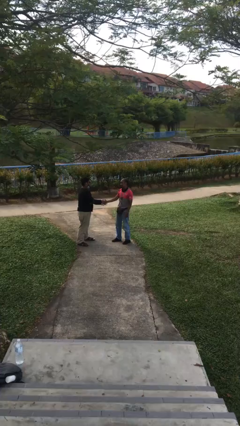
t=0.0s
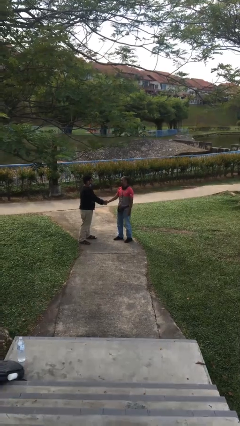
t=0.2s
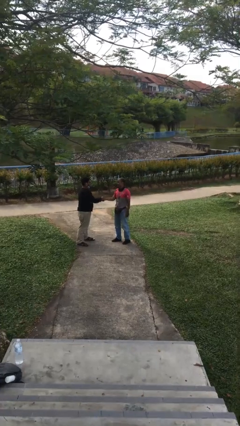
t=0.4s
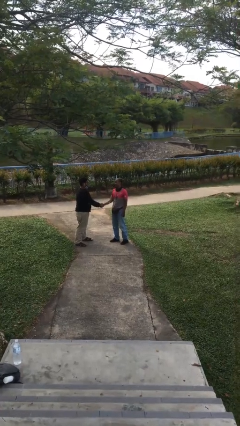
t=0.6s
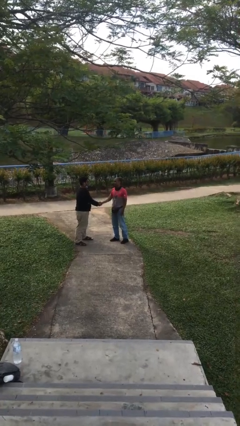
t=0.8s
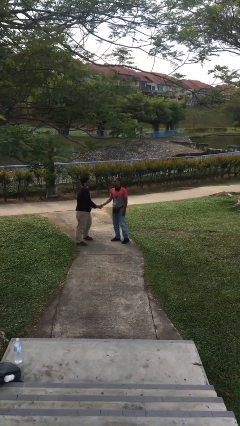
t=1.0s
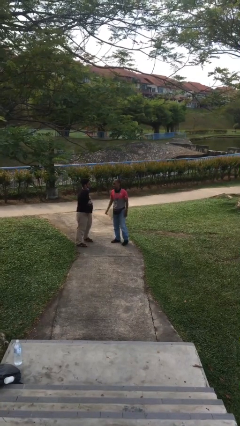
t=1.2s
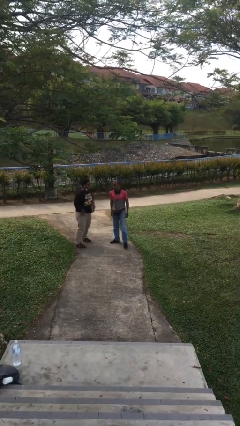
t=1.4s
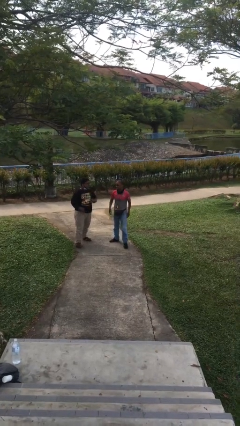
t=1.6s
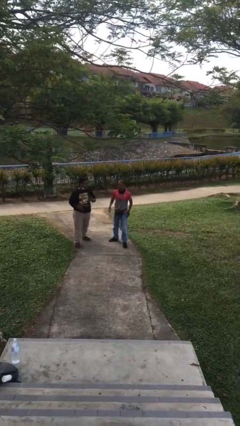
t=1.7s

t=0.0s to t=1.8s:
person shakes hand

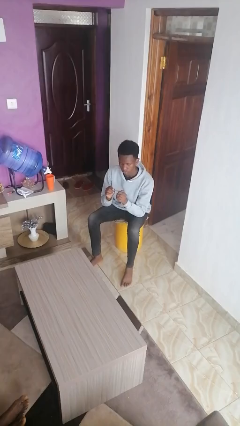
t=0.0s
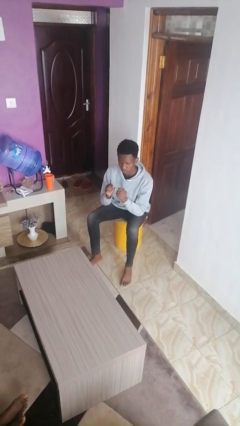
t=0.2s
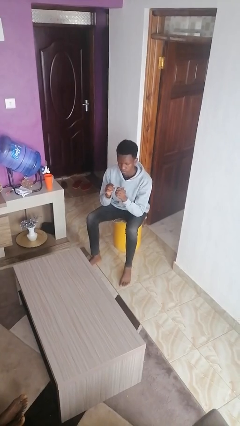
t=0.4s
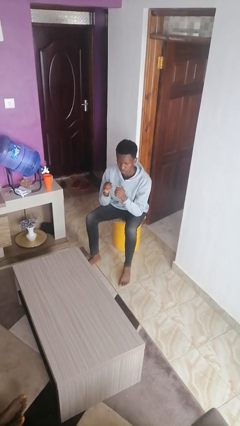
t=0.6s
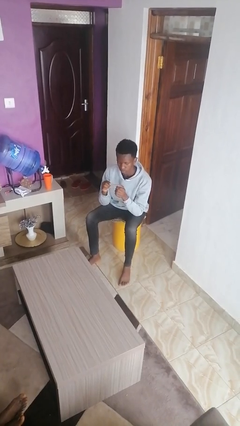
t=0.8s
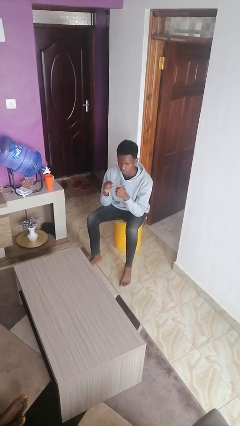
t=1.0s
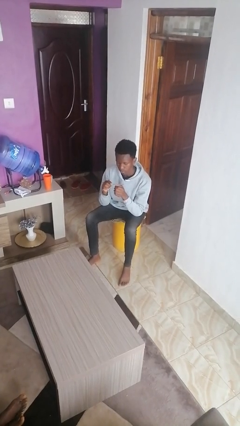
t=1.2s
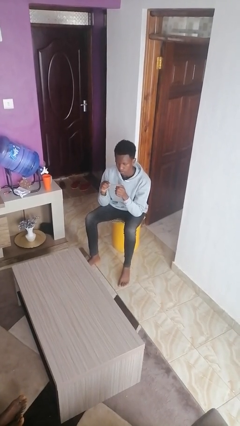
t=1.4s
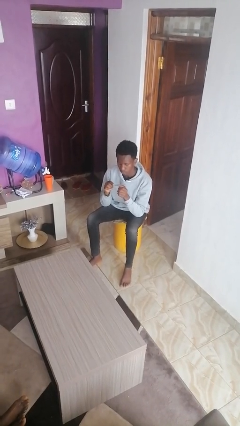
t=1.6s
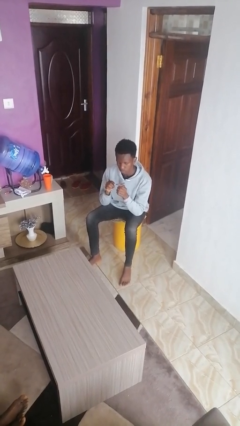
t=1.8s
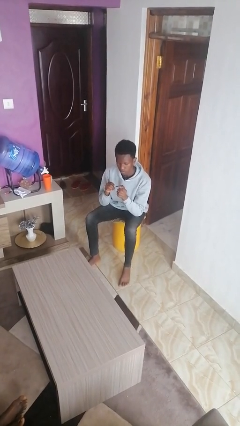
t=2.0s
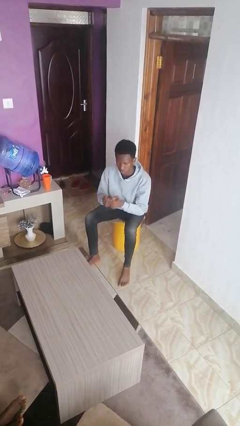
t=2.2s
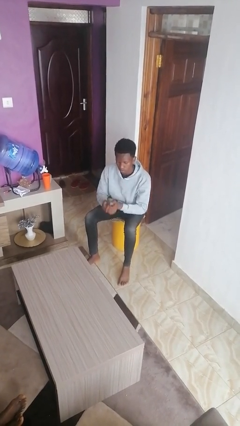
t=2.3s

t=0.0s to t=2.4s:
person files fingernails

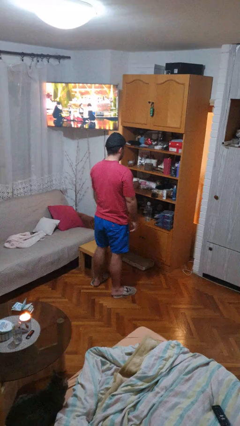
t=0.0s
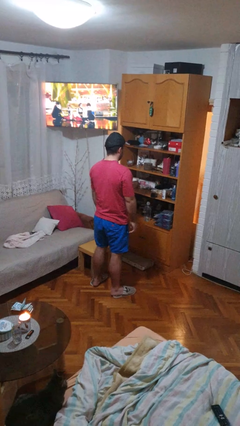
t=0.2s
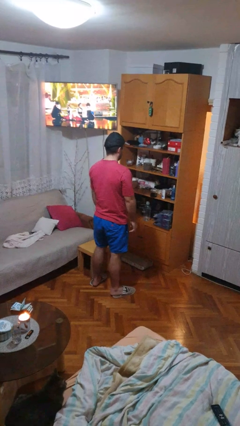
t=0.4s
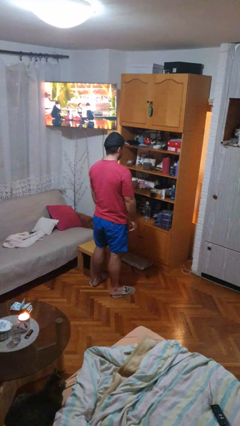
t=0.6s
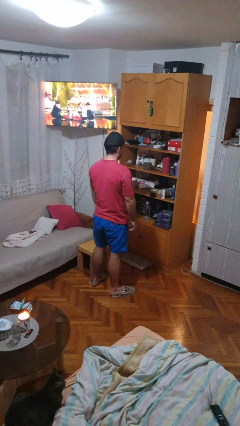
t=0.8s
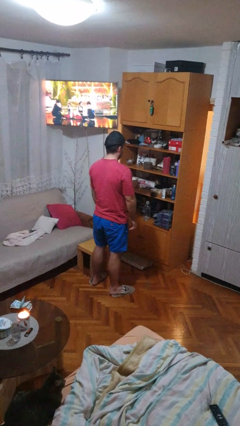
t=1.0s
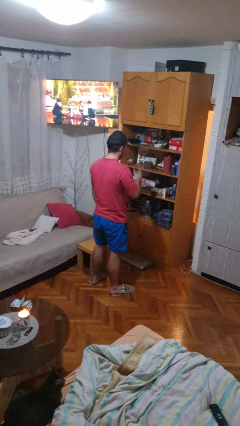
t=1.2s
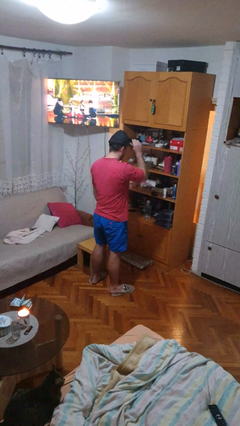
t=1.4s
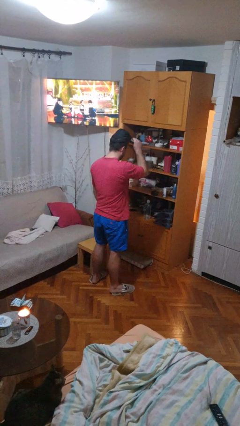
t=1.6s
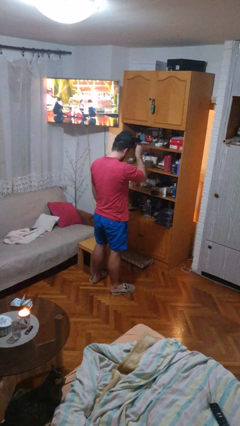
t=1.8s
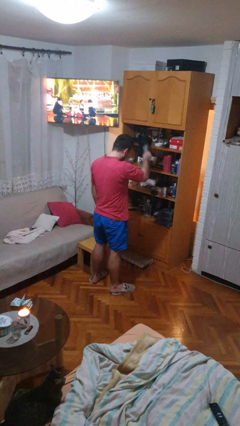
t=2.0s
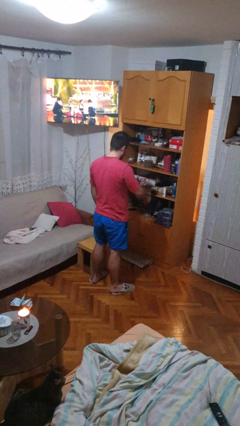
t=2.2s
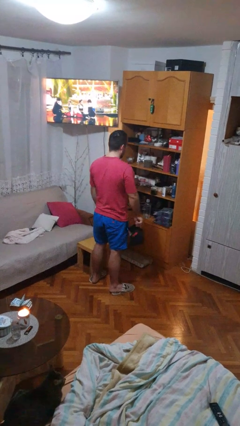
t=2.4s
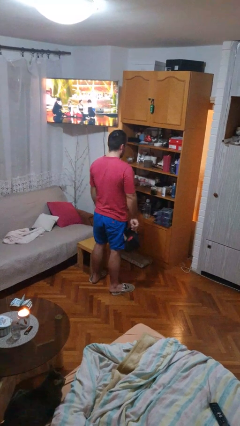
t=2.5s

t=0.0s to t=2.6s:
person takes off hat

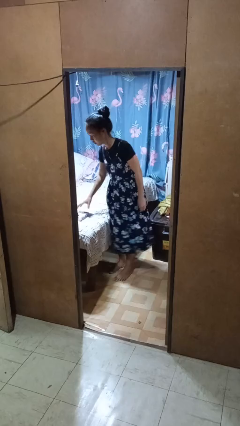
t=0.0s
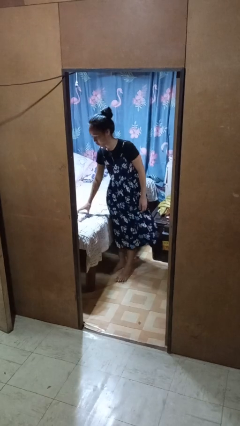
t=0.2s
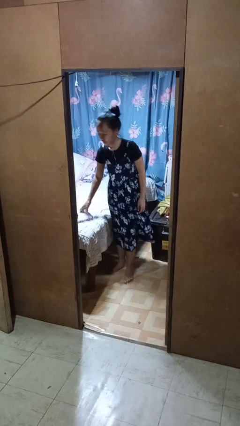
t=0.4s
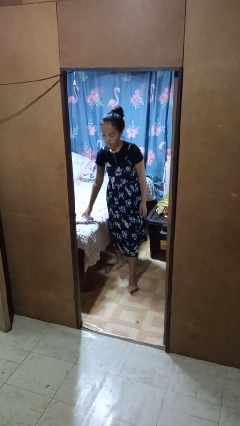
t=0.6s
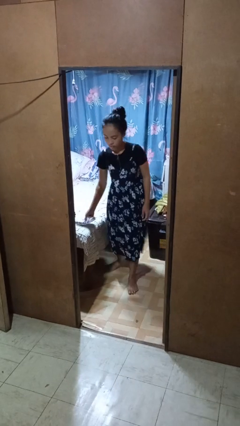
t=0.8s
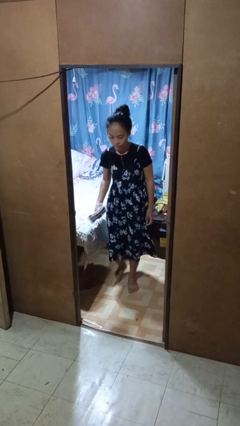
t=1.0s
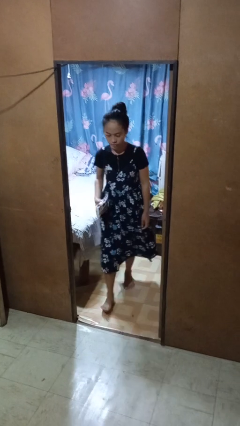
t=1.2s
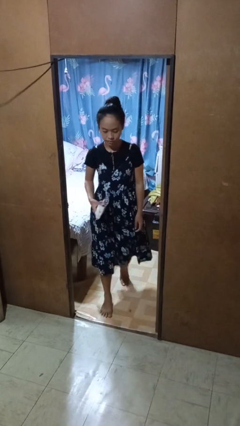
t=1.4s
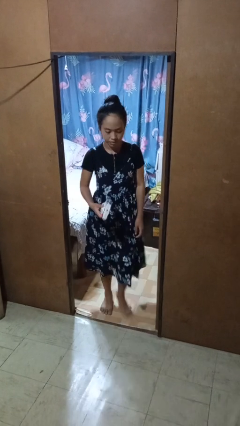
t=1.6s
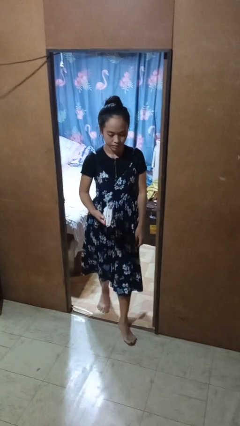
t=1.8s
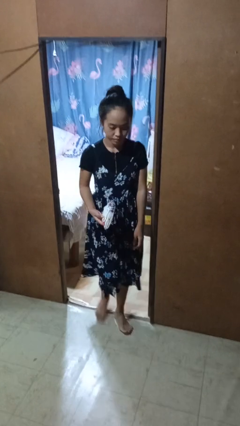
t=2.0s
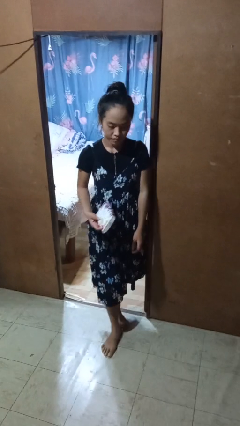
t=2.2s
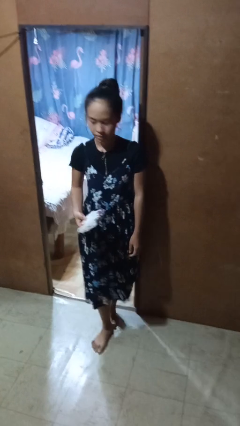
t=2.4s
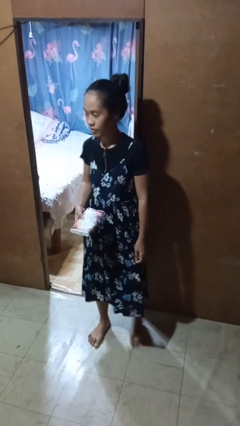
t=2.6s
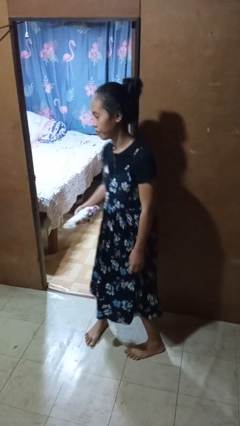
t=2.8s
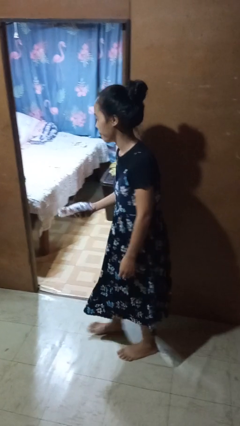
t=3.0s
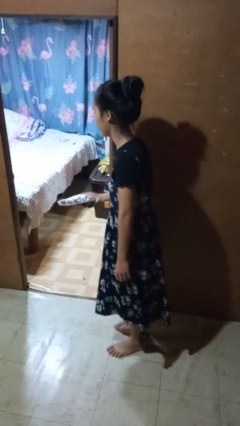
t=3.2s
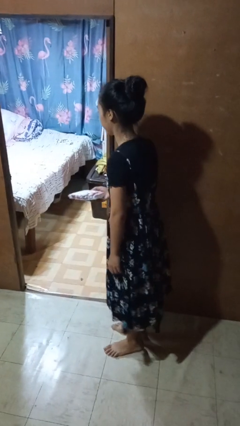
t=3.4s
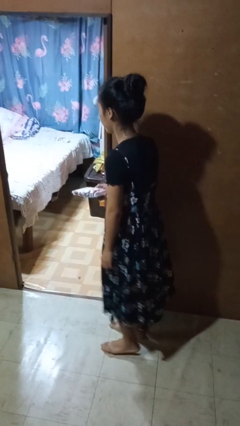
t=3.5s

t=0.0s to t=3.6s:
person picks up object from bed

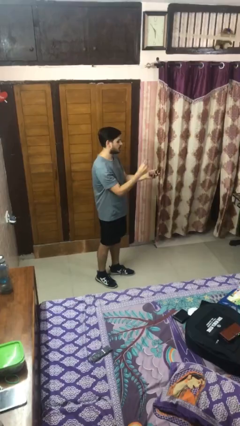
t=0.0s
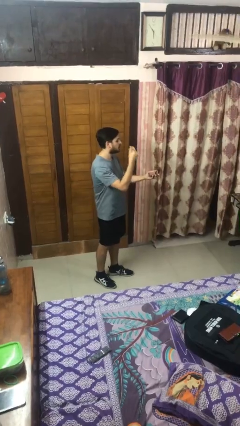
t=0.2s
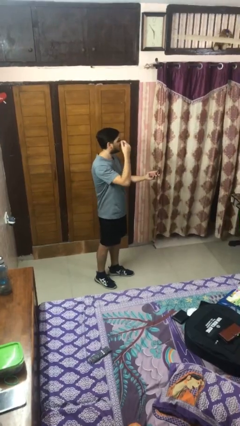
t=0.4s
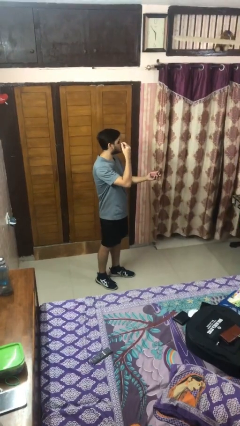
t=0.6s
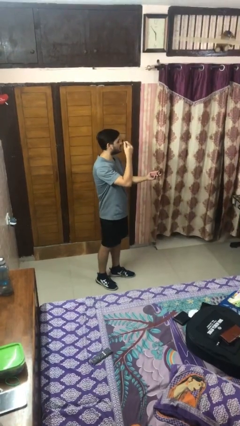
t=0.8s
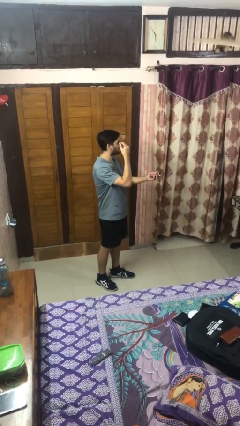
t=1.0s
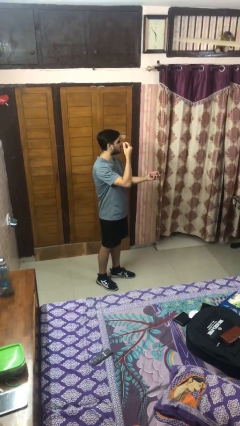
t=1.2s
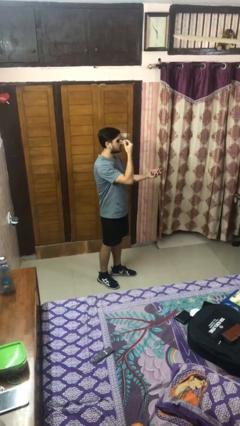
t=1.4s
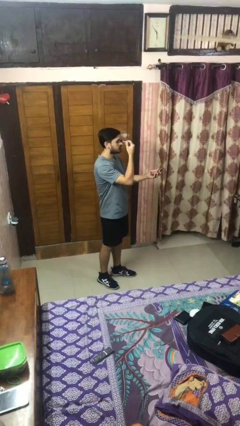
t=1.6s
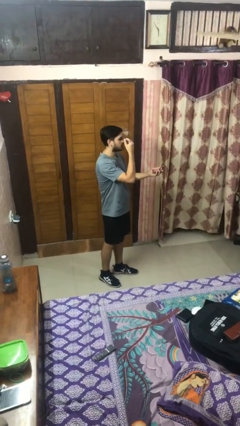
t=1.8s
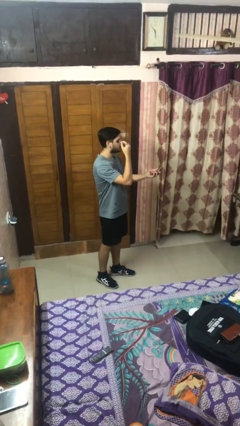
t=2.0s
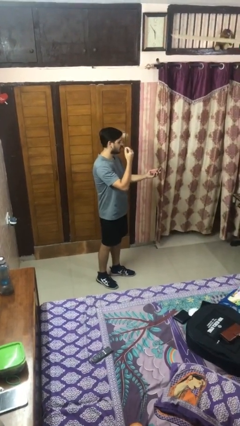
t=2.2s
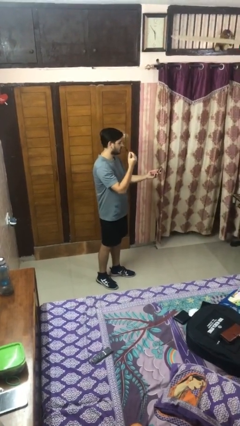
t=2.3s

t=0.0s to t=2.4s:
person applies eye makeup

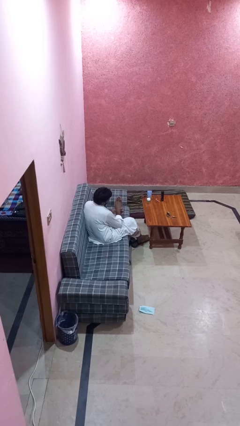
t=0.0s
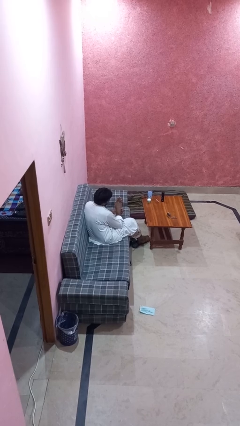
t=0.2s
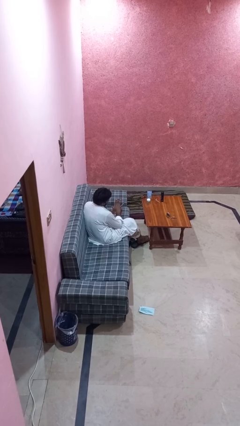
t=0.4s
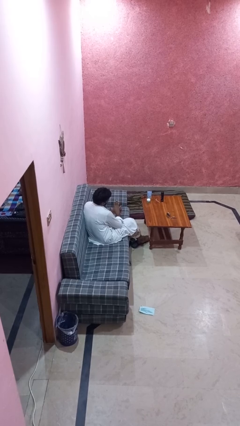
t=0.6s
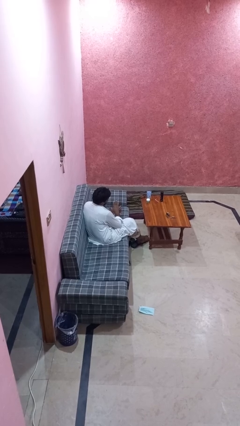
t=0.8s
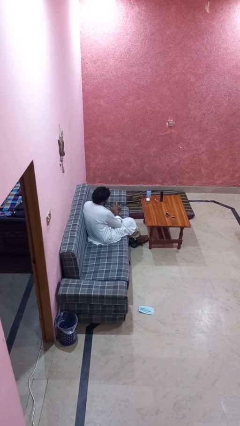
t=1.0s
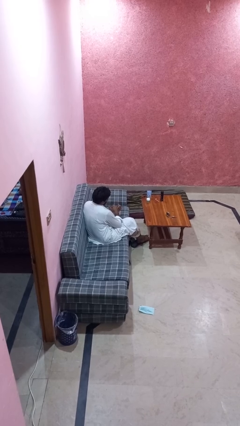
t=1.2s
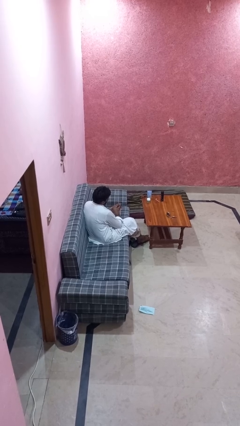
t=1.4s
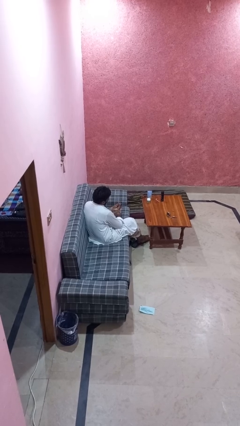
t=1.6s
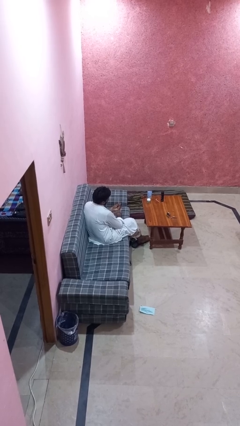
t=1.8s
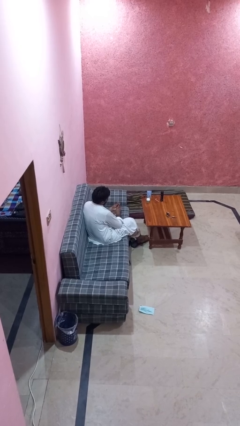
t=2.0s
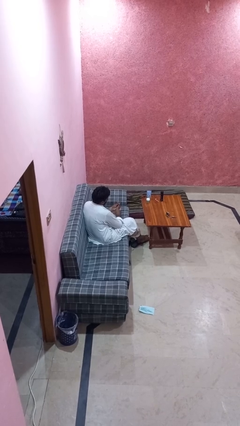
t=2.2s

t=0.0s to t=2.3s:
person takes off ring

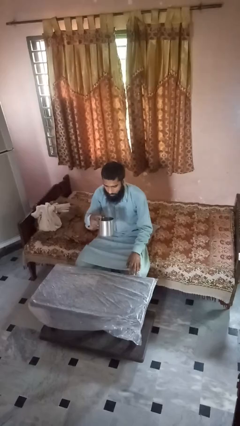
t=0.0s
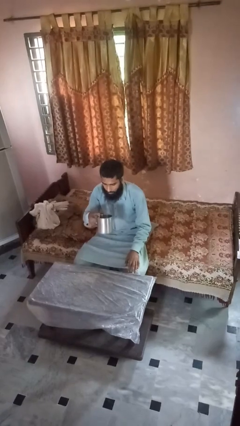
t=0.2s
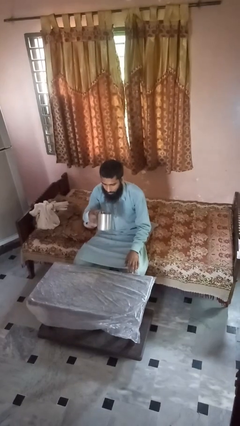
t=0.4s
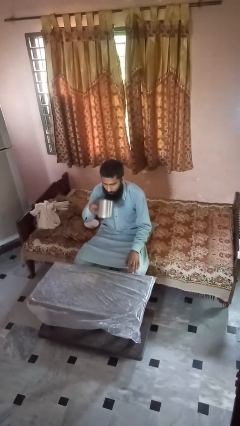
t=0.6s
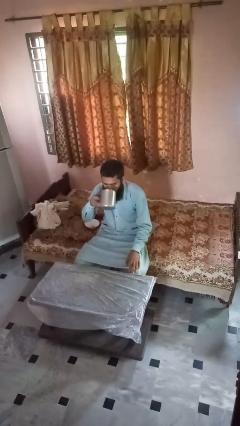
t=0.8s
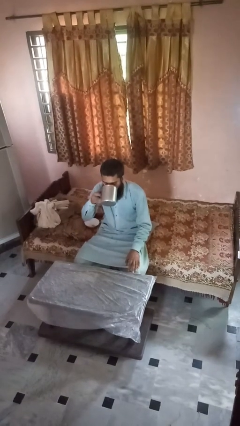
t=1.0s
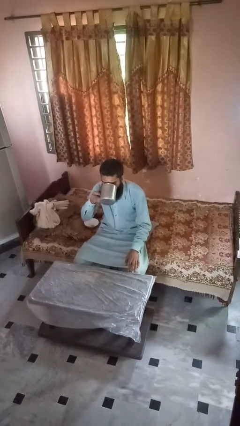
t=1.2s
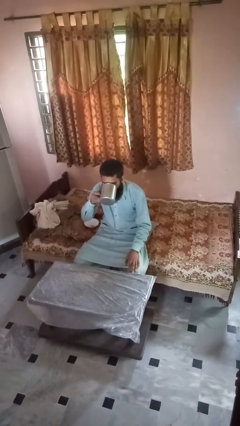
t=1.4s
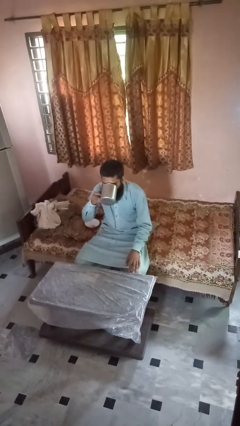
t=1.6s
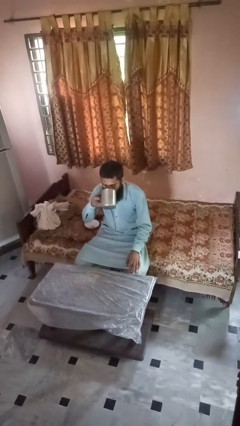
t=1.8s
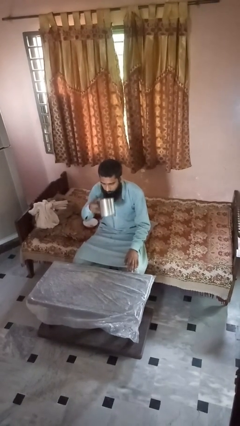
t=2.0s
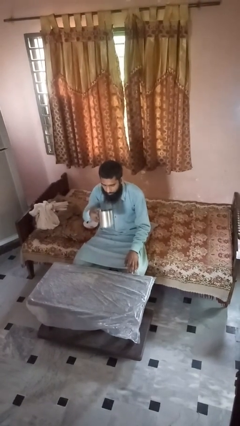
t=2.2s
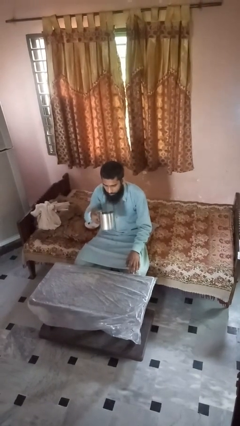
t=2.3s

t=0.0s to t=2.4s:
person drinks from mug
